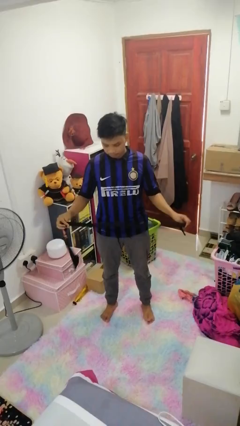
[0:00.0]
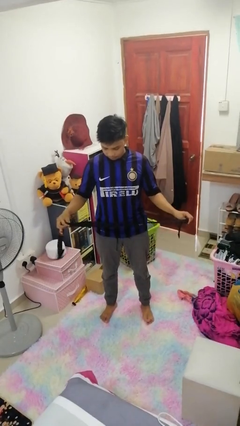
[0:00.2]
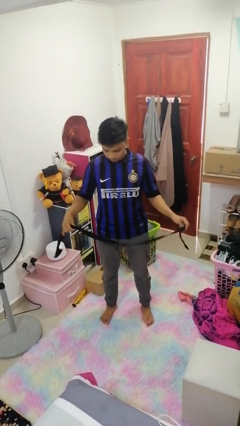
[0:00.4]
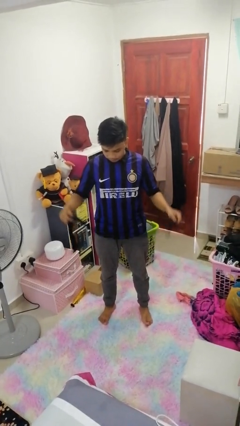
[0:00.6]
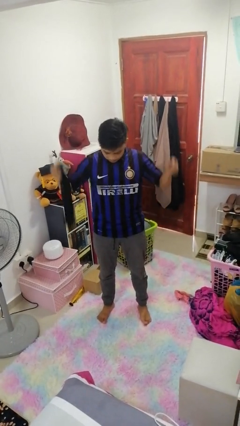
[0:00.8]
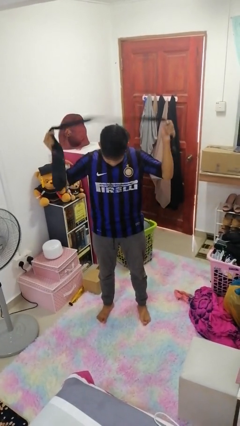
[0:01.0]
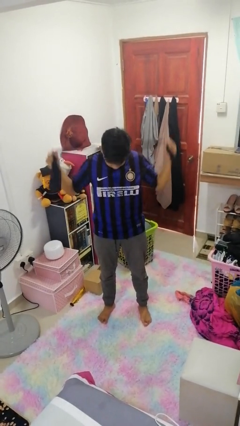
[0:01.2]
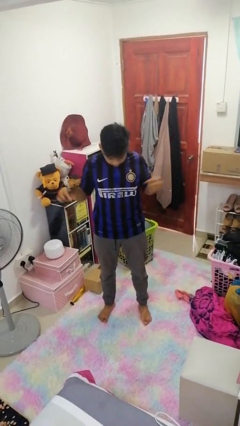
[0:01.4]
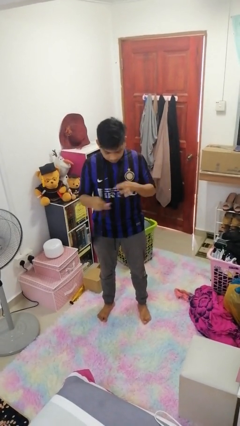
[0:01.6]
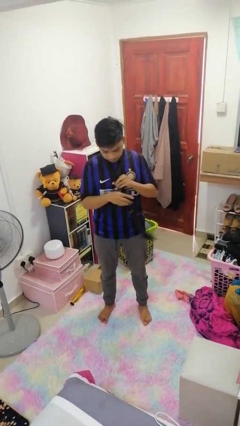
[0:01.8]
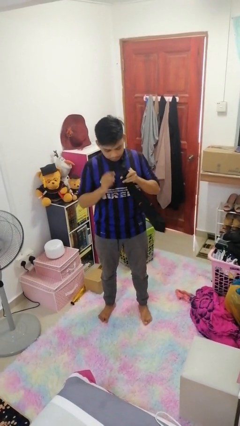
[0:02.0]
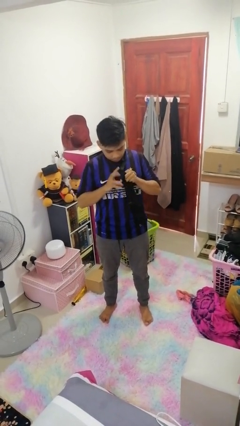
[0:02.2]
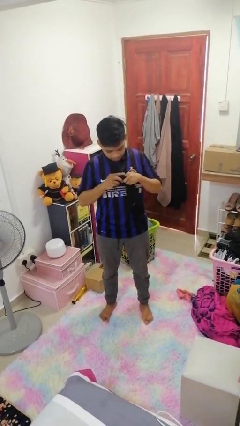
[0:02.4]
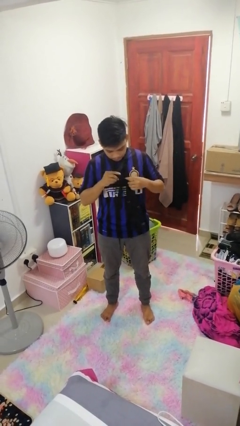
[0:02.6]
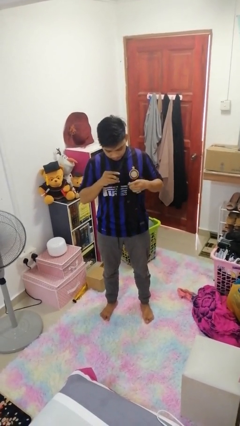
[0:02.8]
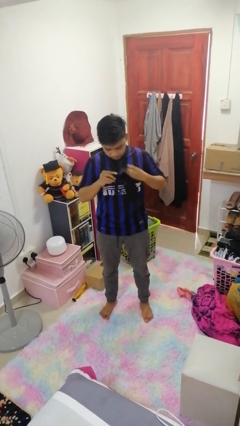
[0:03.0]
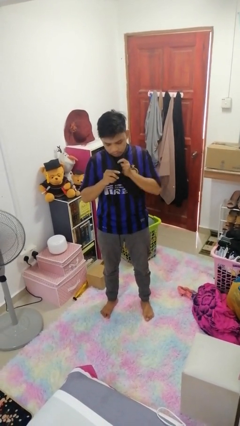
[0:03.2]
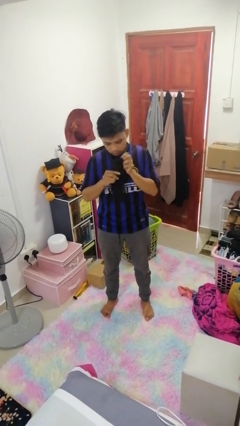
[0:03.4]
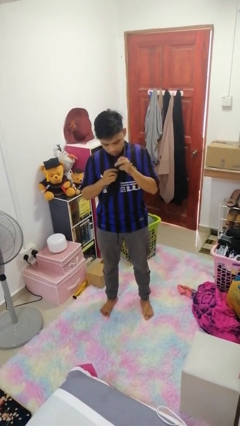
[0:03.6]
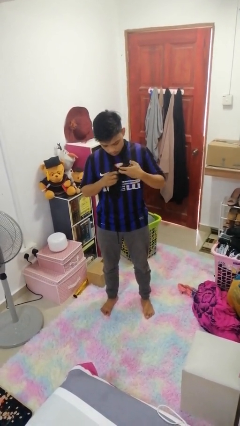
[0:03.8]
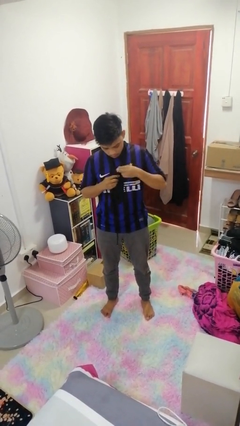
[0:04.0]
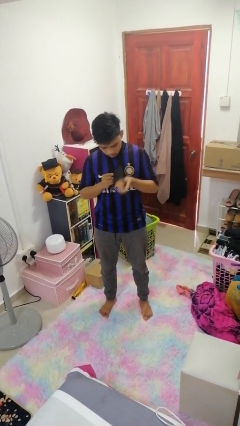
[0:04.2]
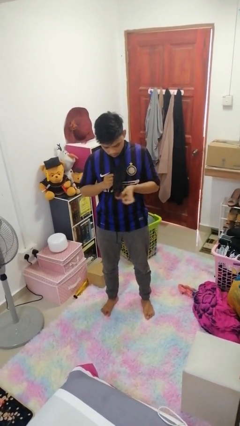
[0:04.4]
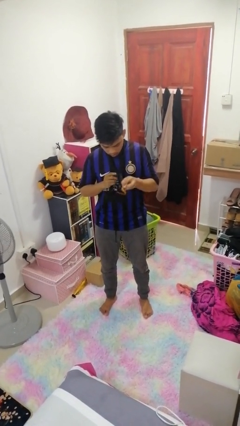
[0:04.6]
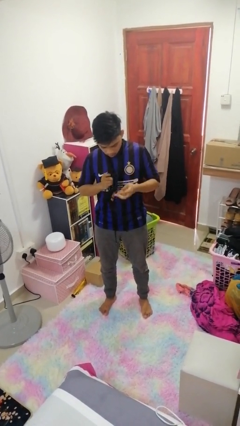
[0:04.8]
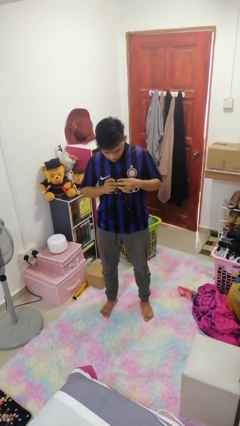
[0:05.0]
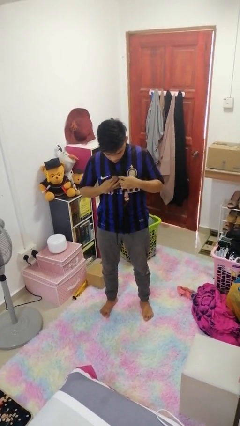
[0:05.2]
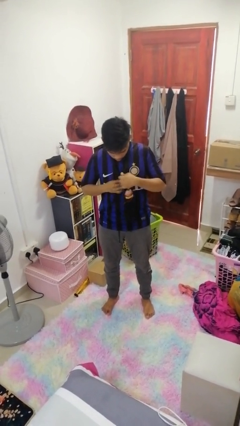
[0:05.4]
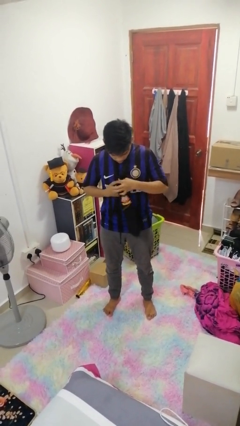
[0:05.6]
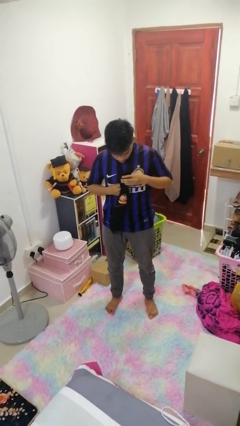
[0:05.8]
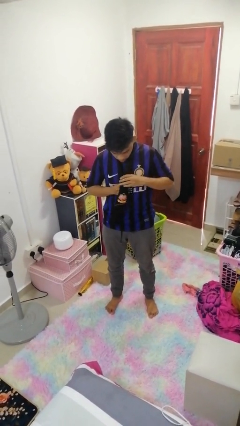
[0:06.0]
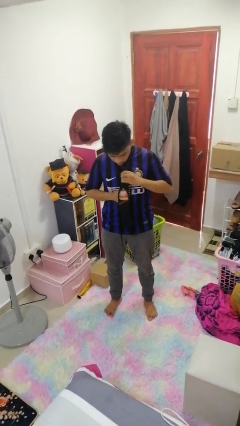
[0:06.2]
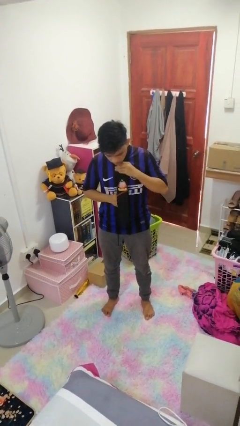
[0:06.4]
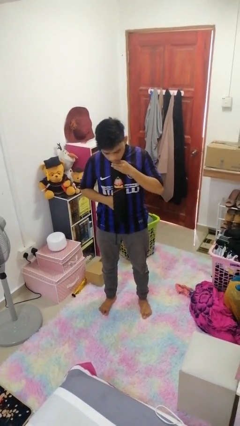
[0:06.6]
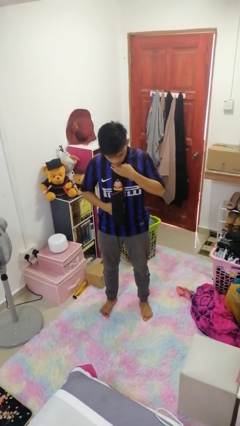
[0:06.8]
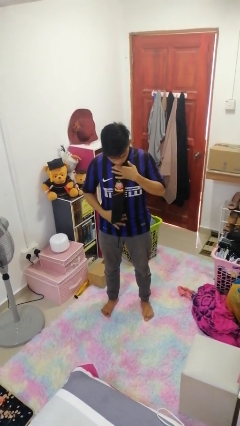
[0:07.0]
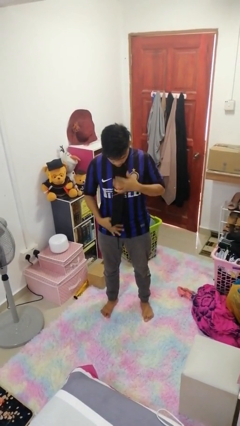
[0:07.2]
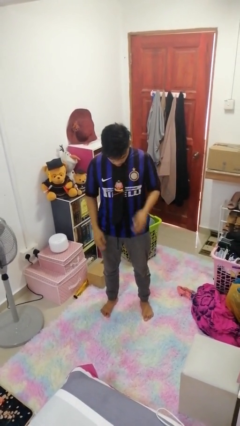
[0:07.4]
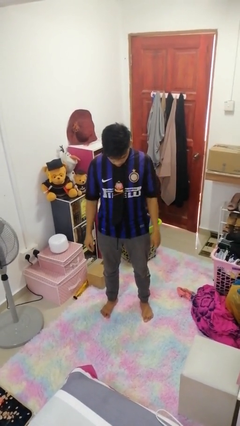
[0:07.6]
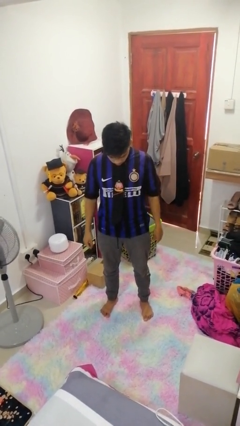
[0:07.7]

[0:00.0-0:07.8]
person puts on necktie

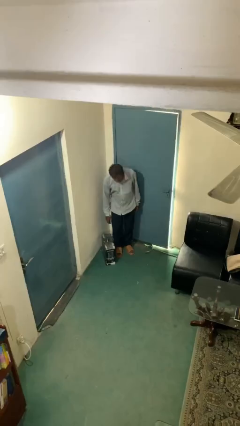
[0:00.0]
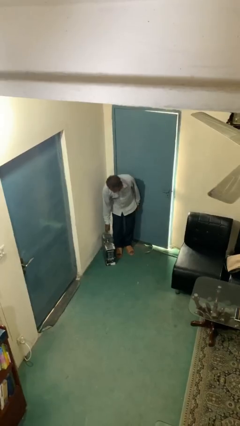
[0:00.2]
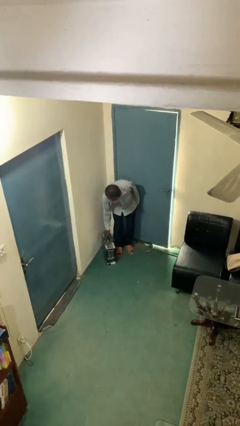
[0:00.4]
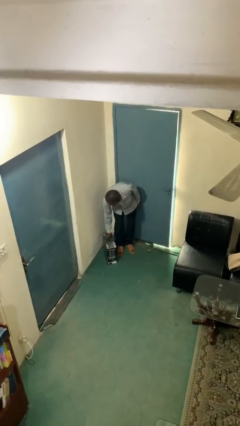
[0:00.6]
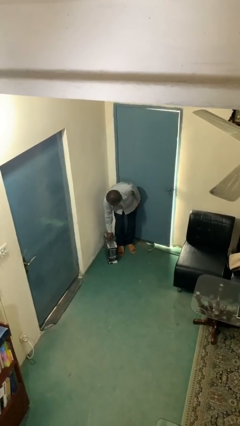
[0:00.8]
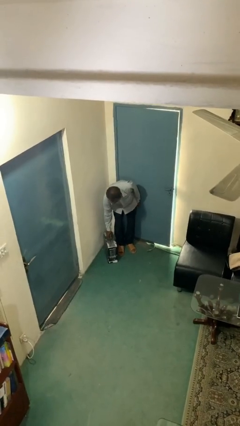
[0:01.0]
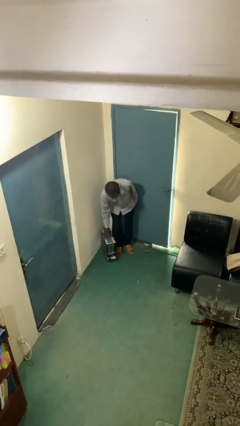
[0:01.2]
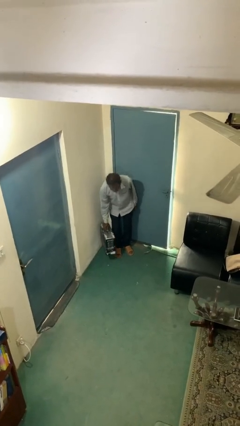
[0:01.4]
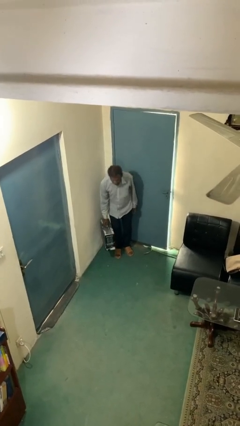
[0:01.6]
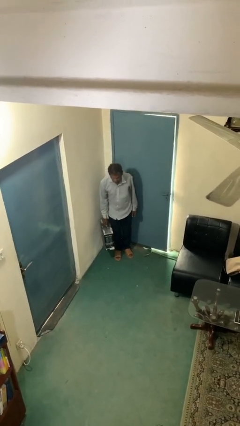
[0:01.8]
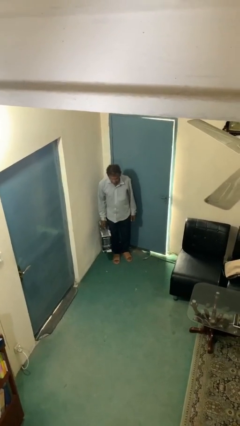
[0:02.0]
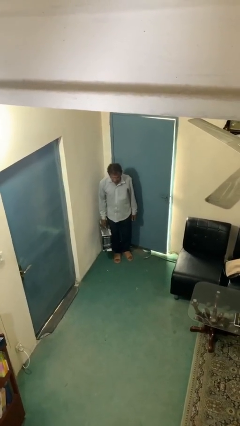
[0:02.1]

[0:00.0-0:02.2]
person picks up object from floor

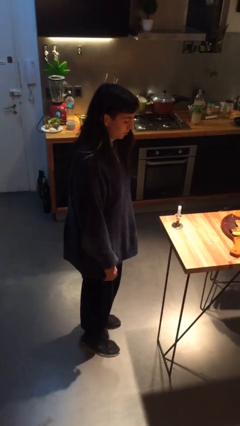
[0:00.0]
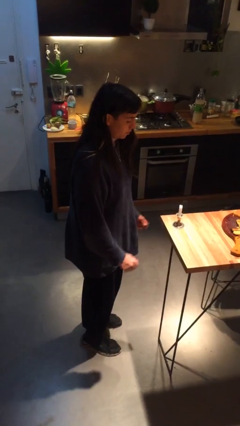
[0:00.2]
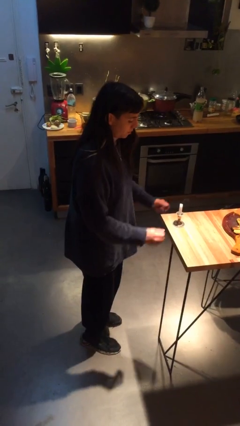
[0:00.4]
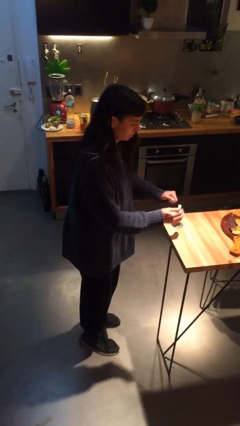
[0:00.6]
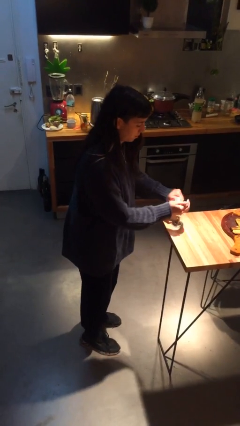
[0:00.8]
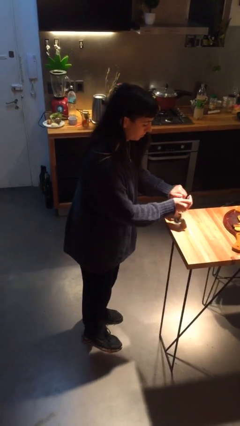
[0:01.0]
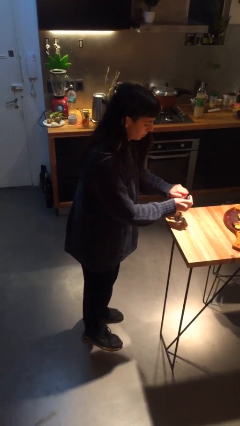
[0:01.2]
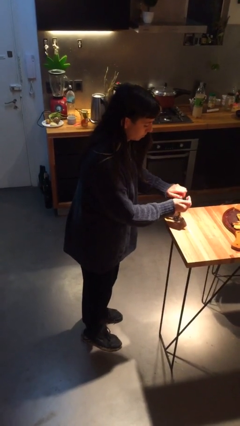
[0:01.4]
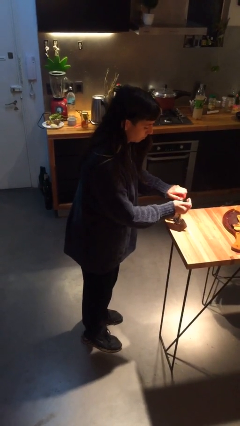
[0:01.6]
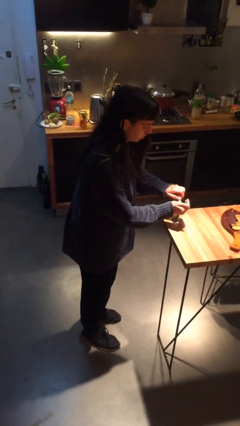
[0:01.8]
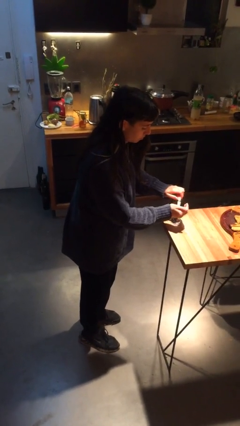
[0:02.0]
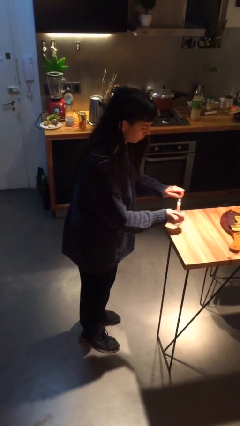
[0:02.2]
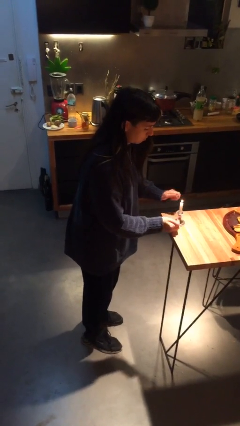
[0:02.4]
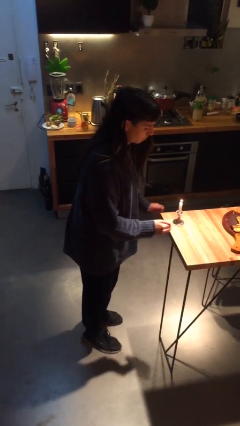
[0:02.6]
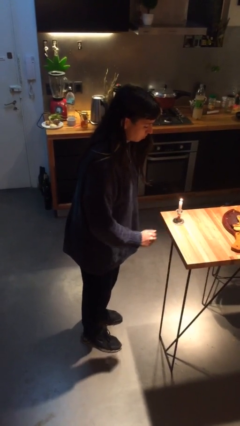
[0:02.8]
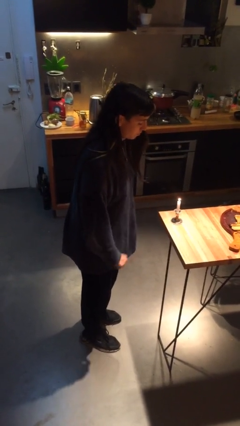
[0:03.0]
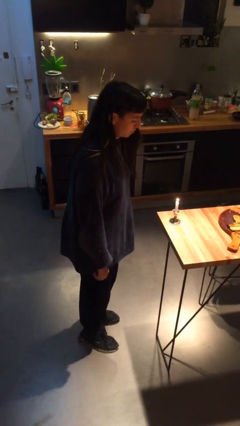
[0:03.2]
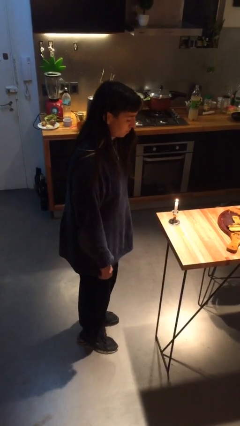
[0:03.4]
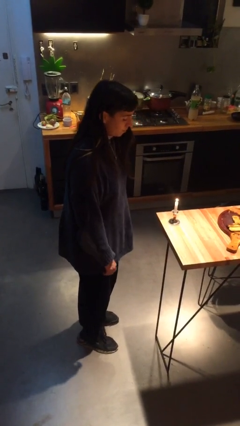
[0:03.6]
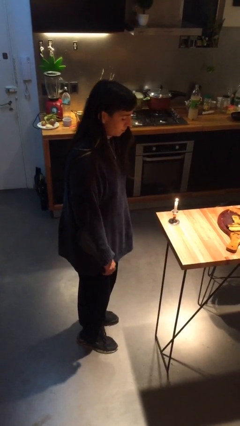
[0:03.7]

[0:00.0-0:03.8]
person lights candle

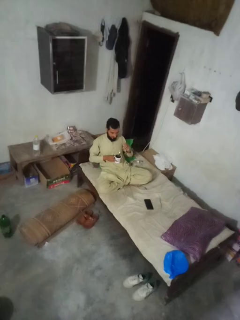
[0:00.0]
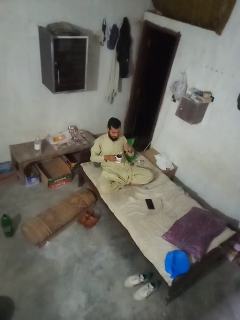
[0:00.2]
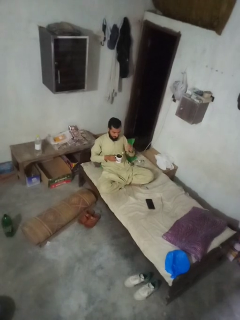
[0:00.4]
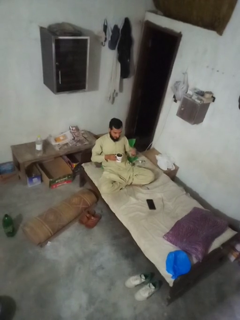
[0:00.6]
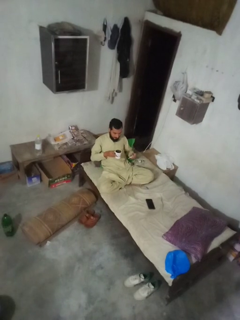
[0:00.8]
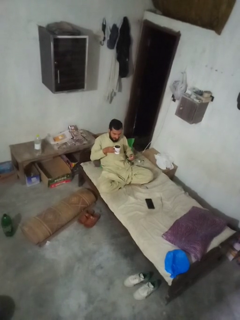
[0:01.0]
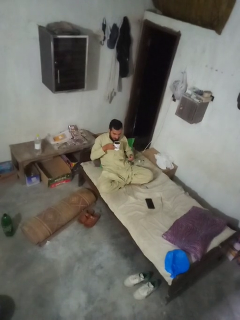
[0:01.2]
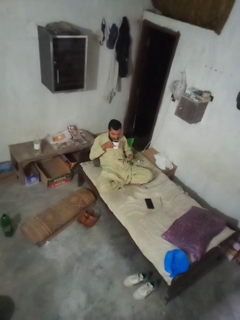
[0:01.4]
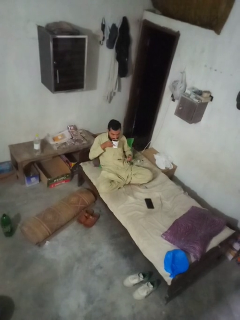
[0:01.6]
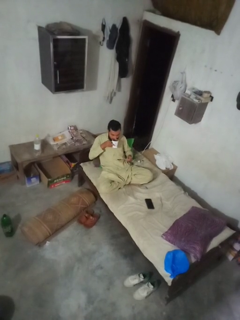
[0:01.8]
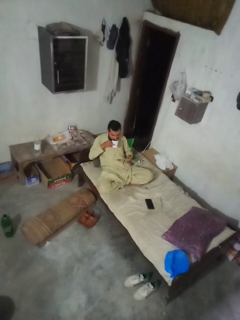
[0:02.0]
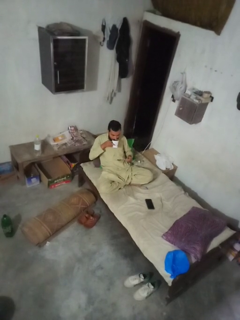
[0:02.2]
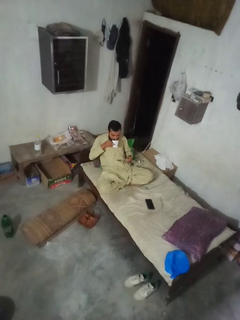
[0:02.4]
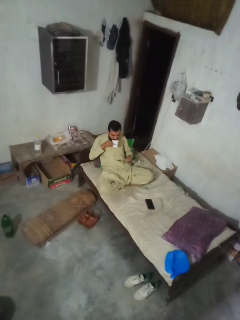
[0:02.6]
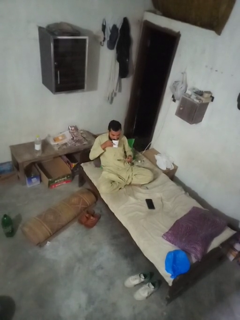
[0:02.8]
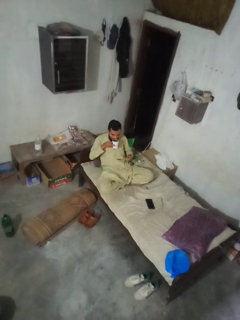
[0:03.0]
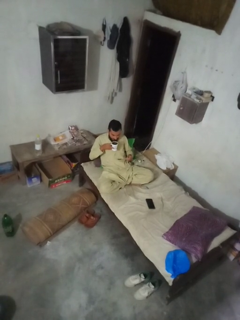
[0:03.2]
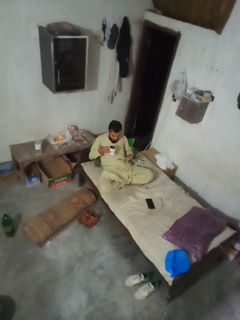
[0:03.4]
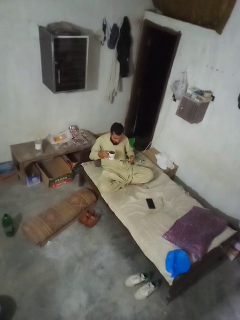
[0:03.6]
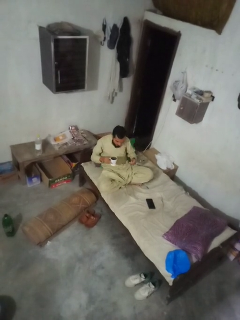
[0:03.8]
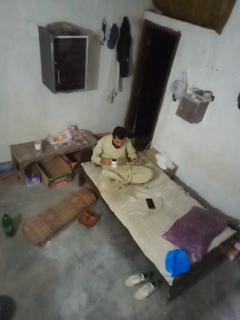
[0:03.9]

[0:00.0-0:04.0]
person drinks from mug

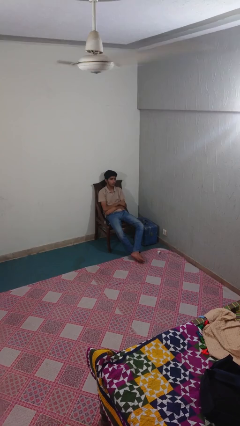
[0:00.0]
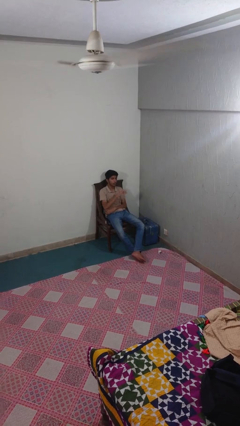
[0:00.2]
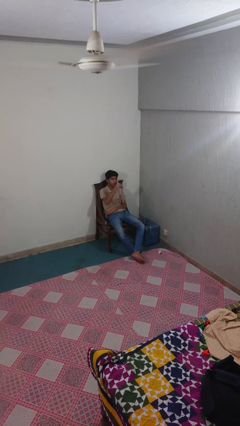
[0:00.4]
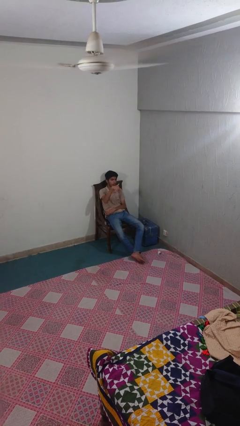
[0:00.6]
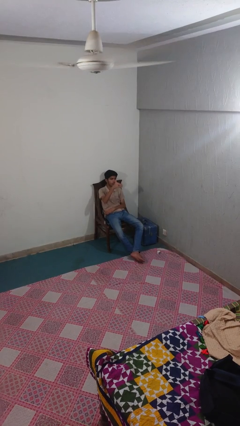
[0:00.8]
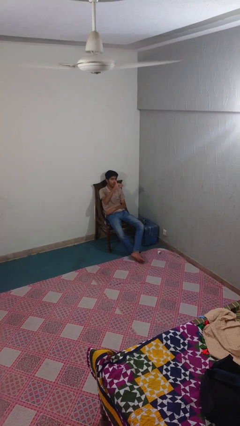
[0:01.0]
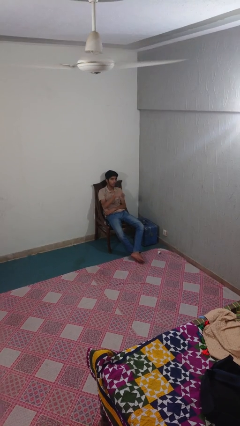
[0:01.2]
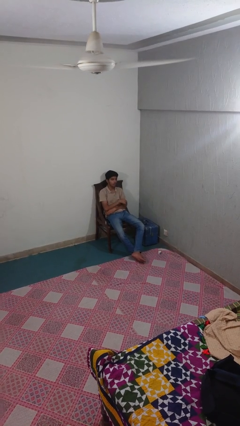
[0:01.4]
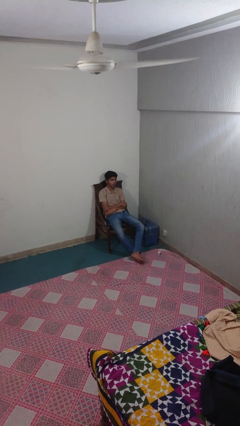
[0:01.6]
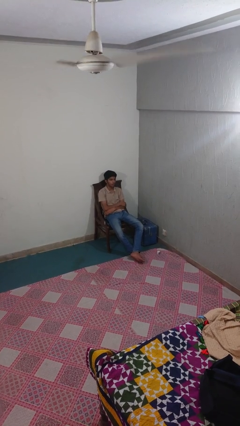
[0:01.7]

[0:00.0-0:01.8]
person gestures come here
